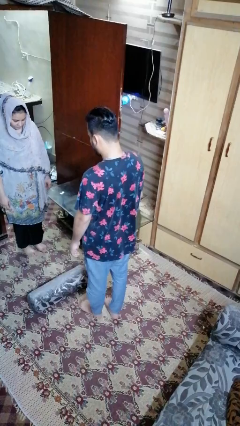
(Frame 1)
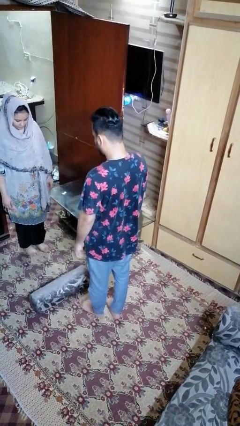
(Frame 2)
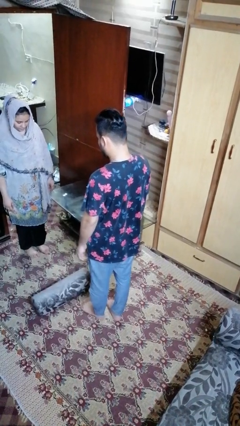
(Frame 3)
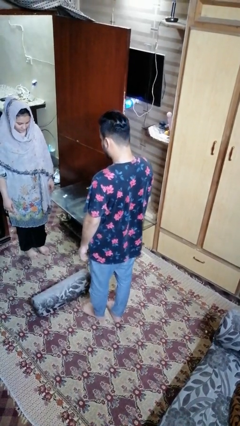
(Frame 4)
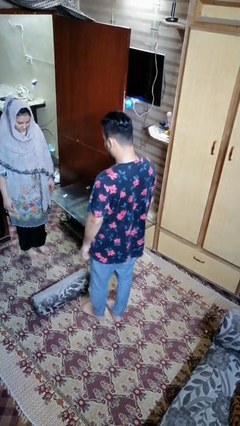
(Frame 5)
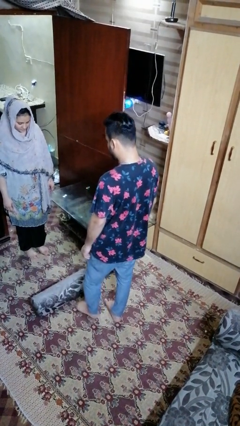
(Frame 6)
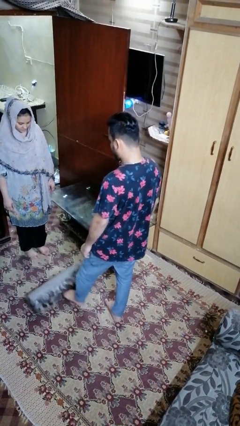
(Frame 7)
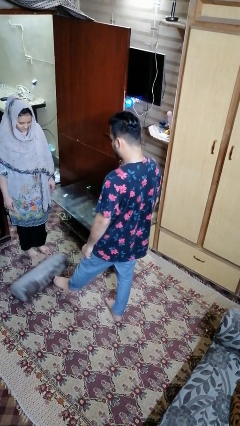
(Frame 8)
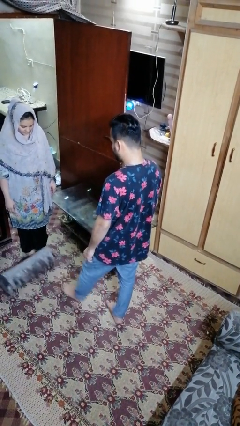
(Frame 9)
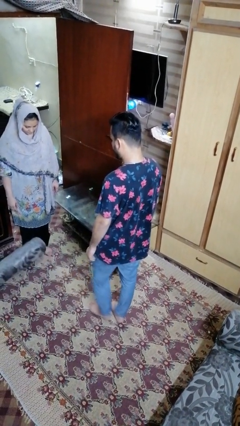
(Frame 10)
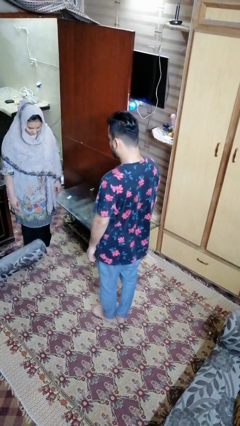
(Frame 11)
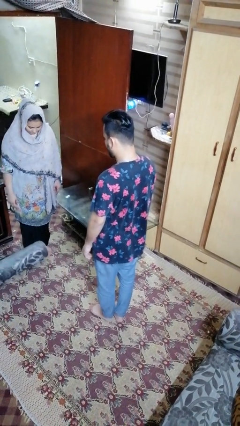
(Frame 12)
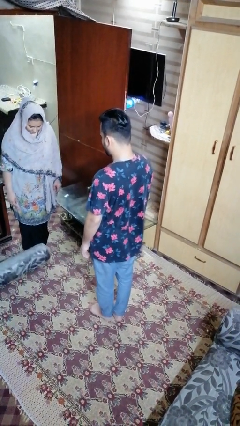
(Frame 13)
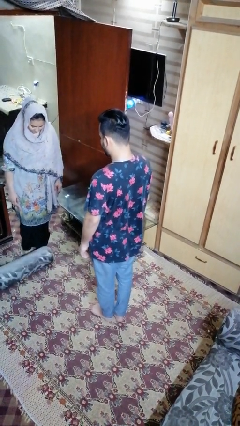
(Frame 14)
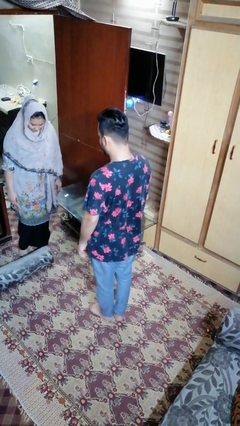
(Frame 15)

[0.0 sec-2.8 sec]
person kicks object to person

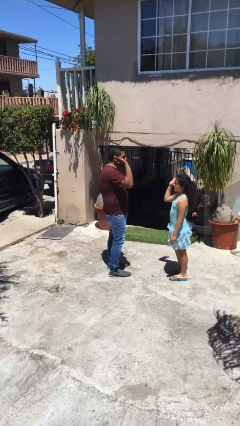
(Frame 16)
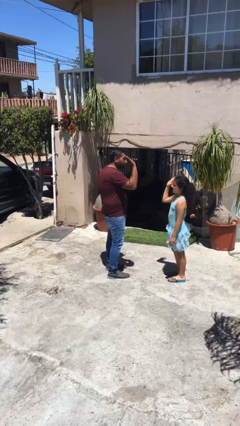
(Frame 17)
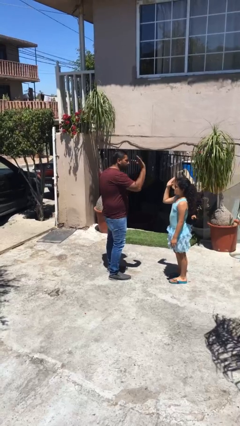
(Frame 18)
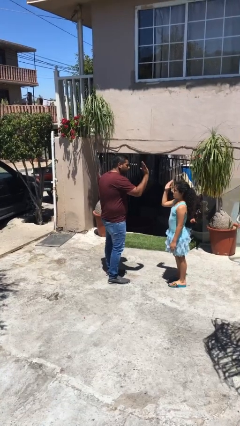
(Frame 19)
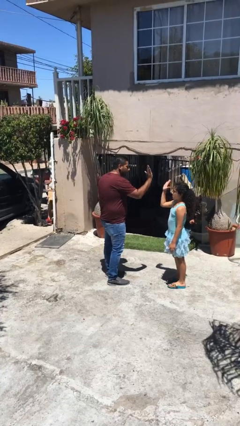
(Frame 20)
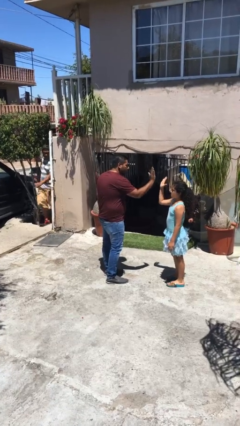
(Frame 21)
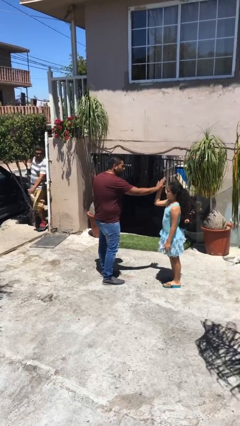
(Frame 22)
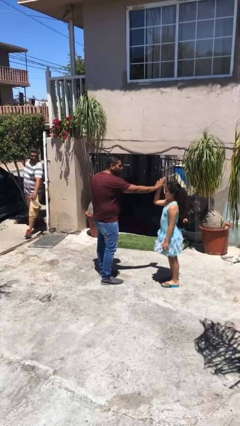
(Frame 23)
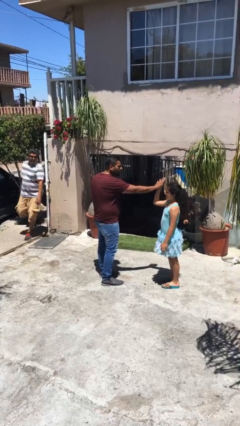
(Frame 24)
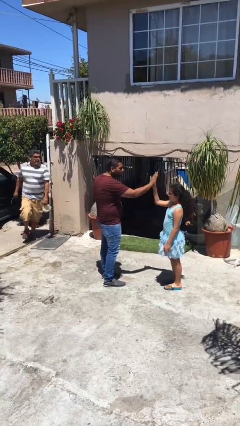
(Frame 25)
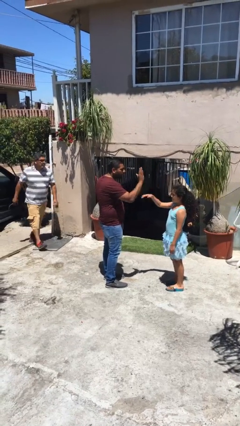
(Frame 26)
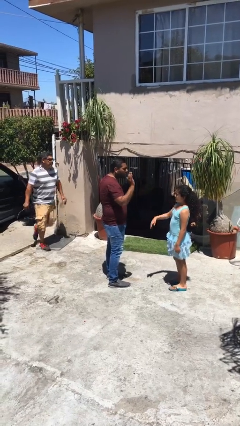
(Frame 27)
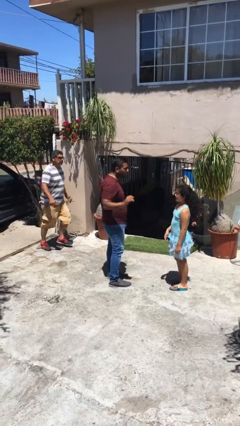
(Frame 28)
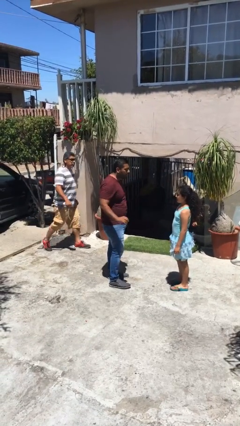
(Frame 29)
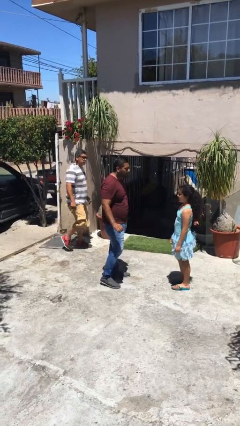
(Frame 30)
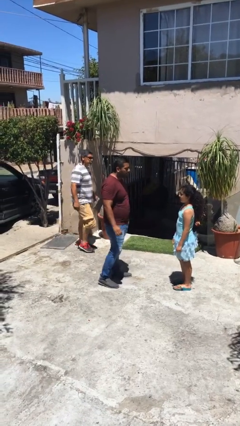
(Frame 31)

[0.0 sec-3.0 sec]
person highfives hand

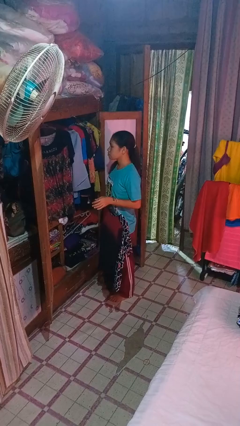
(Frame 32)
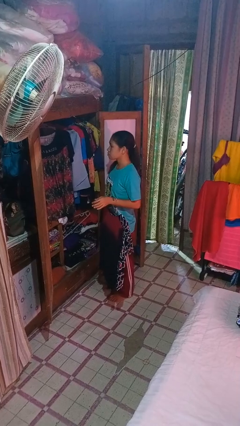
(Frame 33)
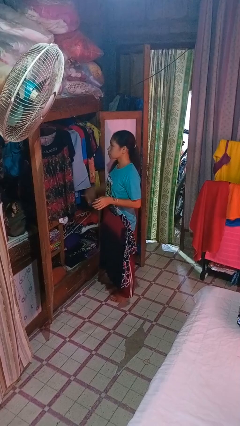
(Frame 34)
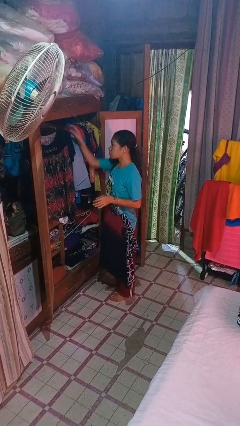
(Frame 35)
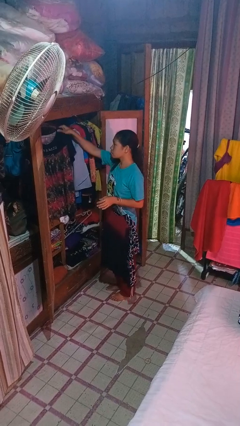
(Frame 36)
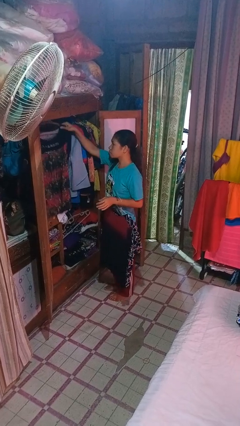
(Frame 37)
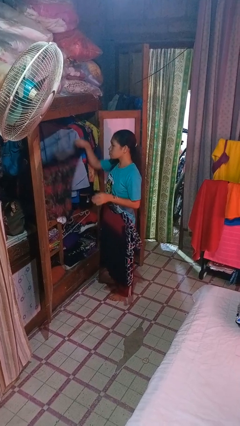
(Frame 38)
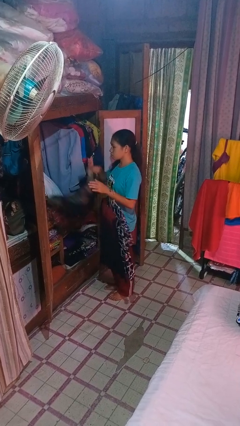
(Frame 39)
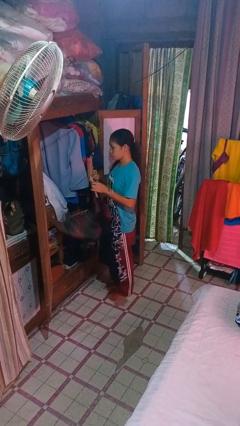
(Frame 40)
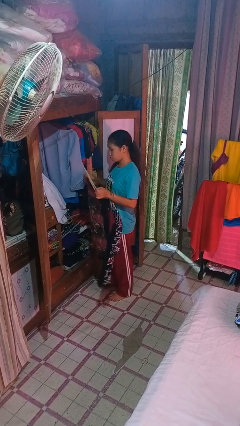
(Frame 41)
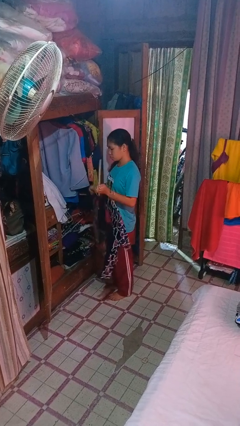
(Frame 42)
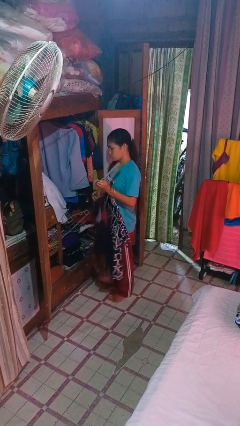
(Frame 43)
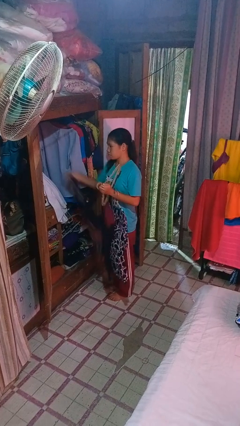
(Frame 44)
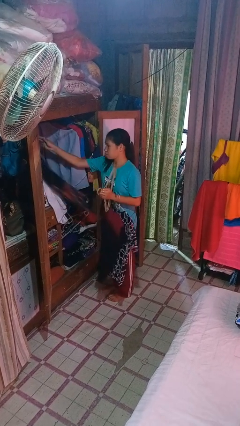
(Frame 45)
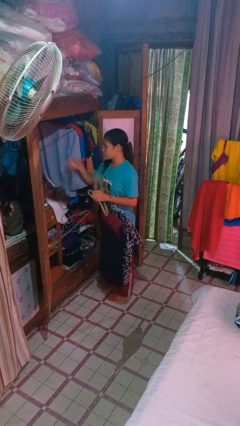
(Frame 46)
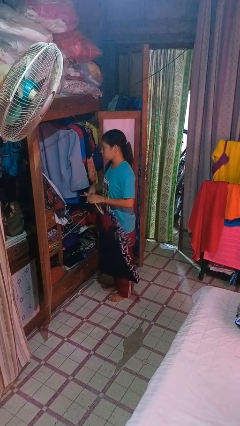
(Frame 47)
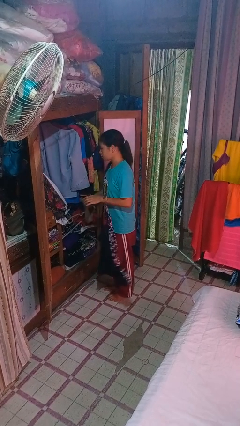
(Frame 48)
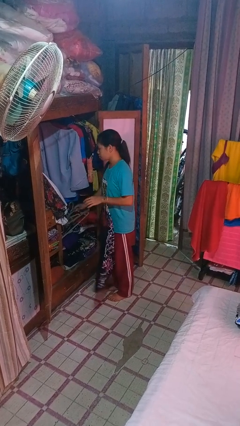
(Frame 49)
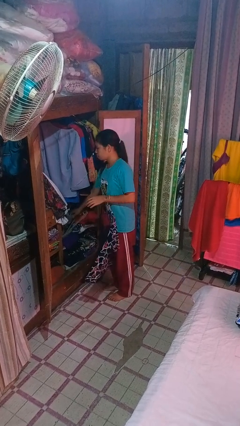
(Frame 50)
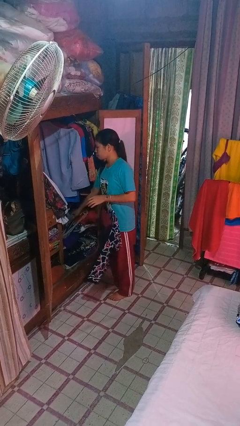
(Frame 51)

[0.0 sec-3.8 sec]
person takes clothes from closet

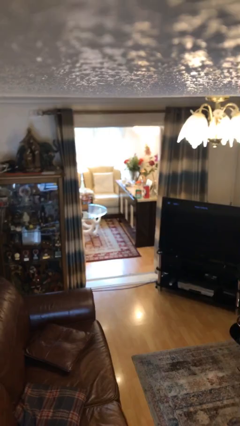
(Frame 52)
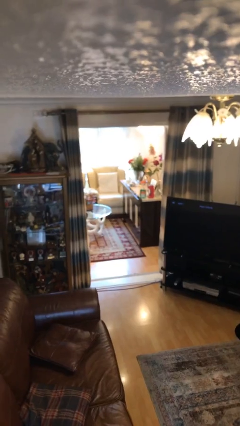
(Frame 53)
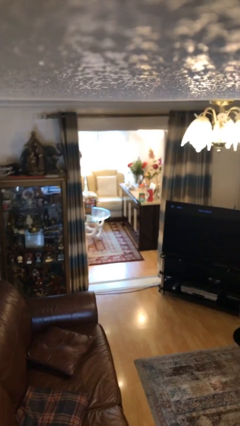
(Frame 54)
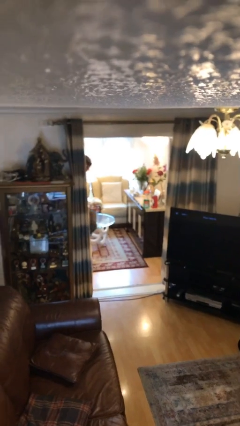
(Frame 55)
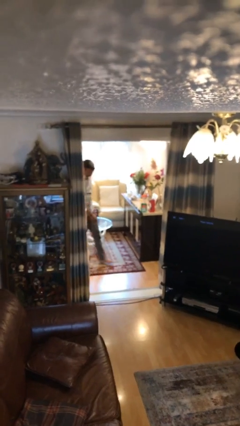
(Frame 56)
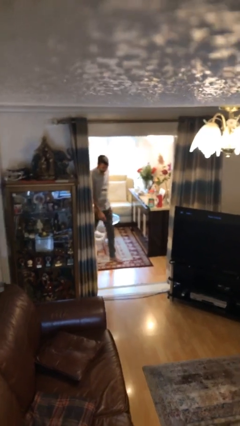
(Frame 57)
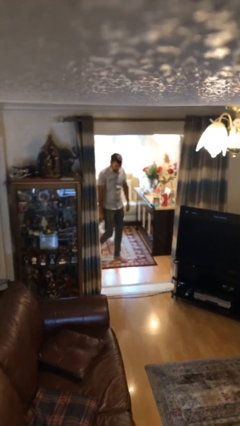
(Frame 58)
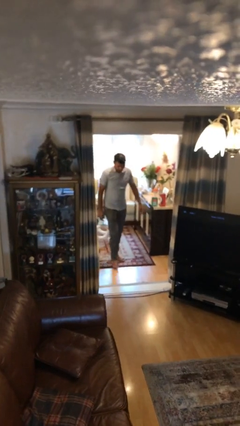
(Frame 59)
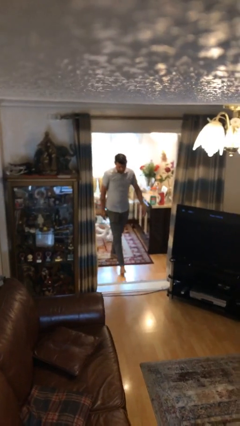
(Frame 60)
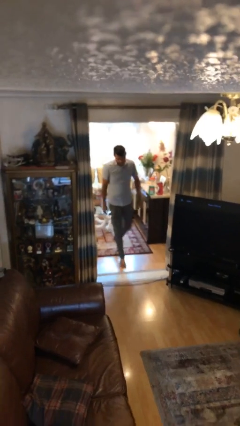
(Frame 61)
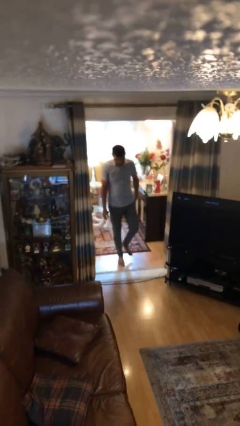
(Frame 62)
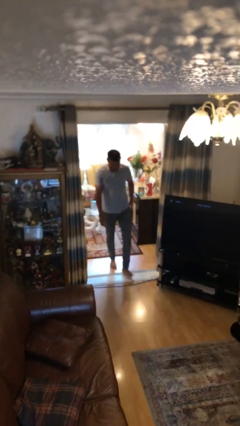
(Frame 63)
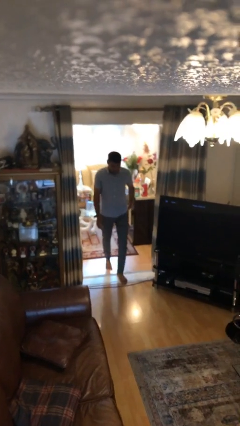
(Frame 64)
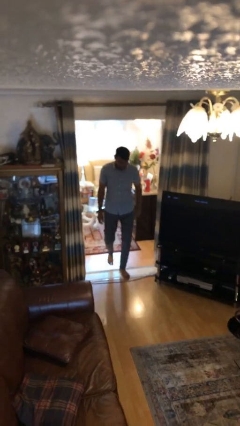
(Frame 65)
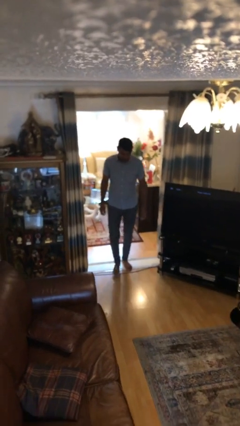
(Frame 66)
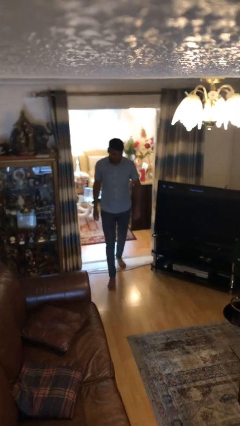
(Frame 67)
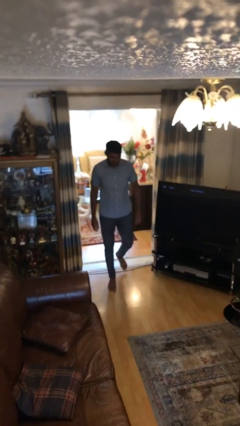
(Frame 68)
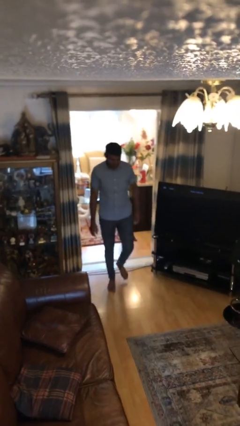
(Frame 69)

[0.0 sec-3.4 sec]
person enters scene through structure

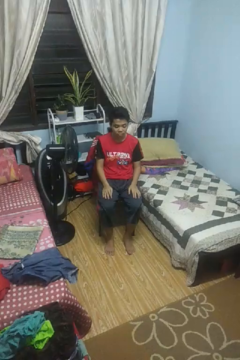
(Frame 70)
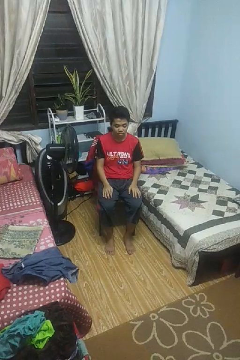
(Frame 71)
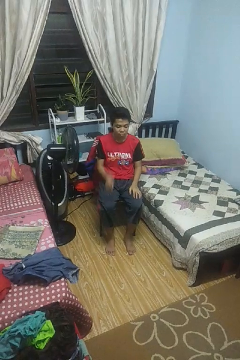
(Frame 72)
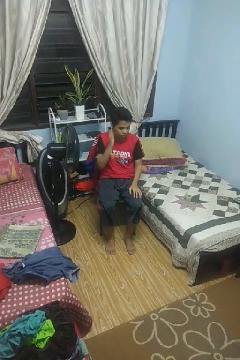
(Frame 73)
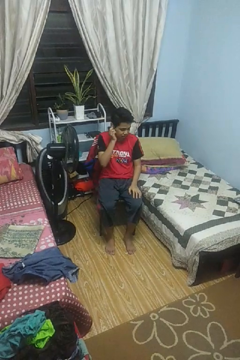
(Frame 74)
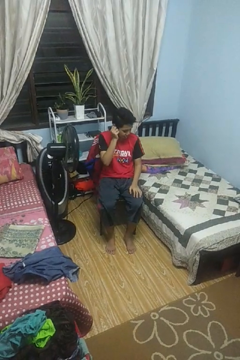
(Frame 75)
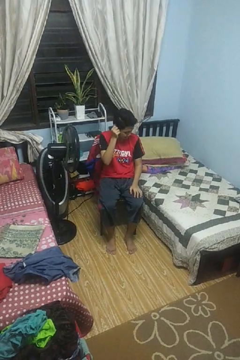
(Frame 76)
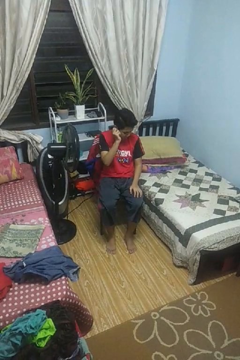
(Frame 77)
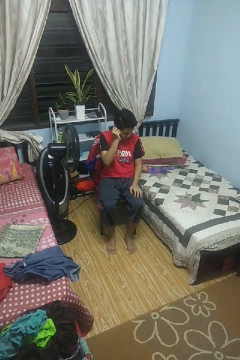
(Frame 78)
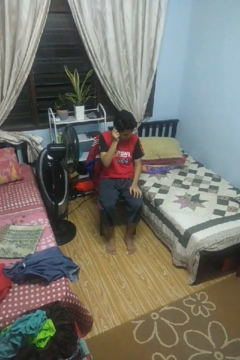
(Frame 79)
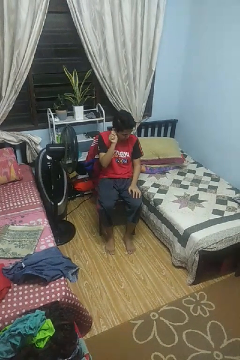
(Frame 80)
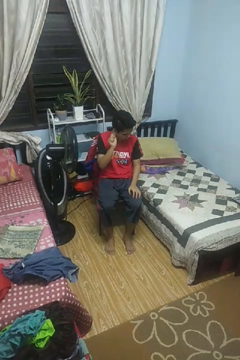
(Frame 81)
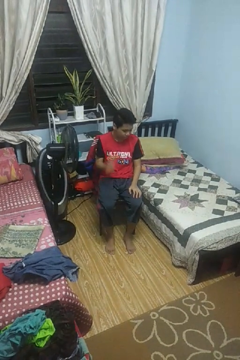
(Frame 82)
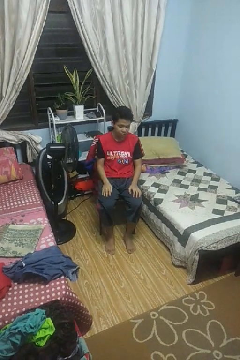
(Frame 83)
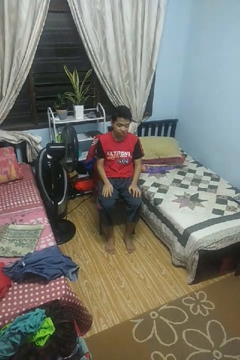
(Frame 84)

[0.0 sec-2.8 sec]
person touches earlobe

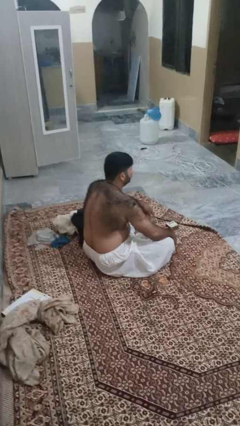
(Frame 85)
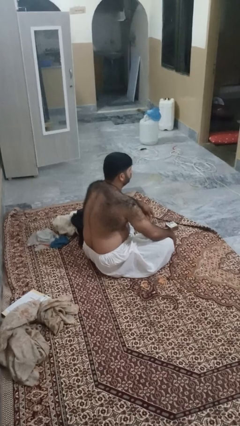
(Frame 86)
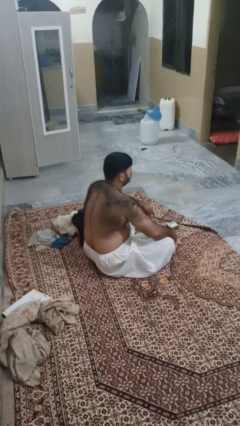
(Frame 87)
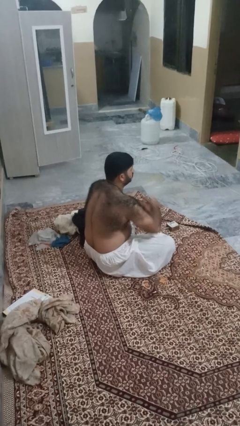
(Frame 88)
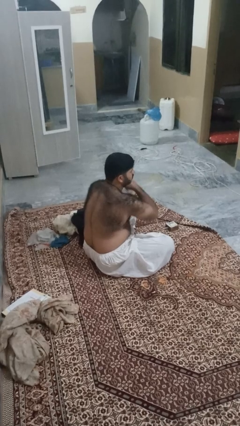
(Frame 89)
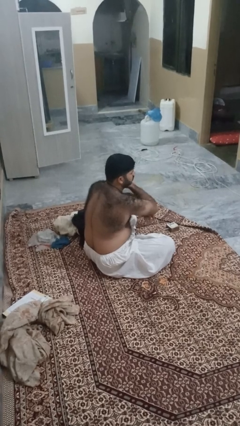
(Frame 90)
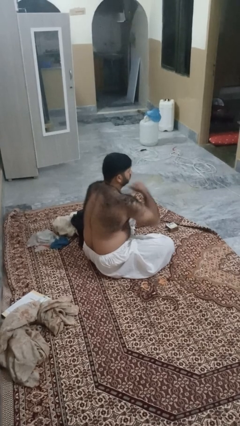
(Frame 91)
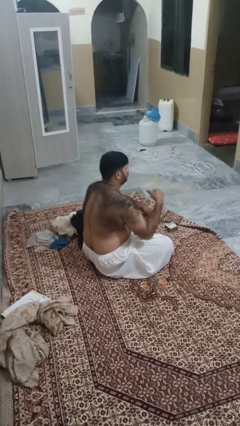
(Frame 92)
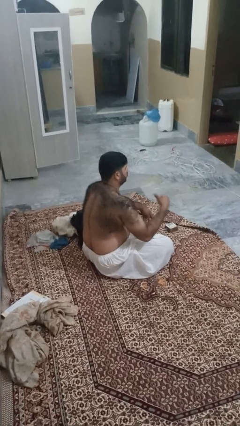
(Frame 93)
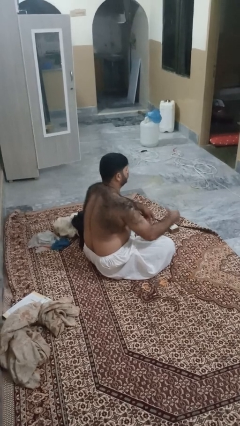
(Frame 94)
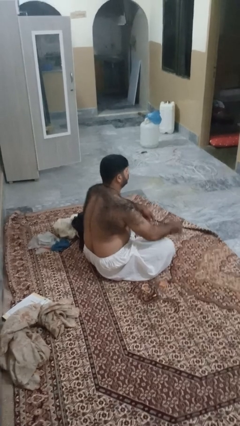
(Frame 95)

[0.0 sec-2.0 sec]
person gestures cut
